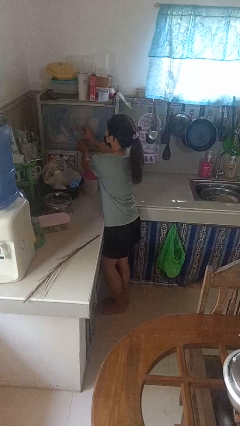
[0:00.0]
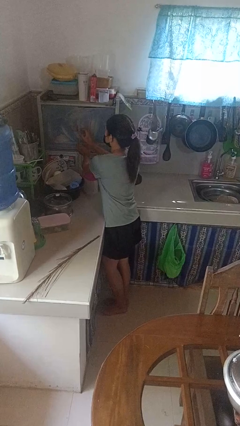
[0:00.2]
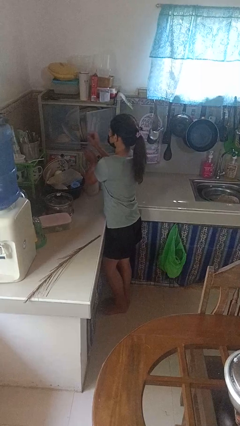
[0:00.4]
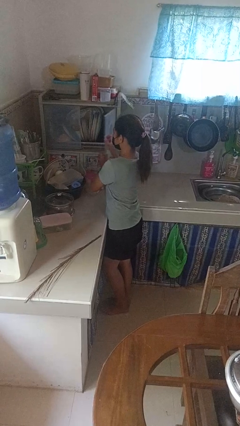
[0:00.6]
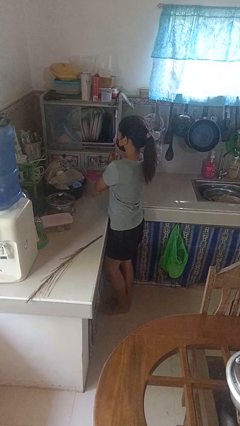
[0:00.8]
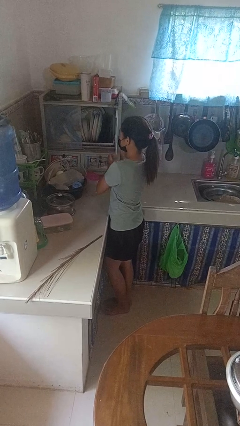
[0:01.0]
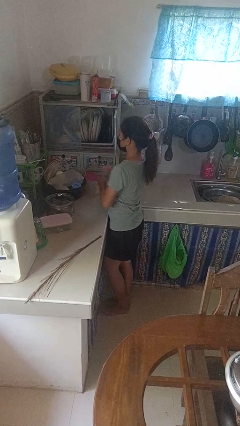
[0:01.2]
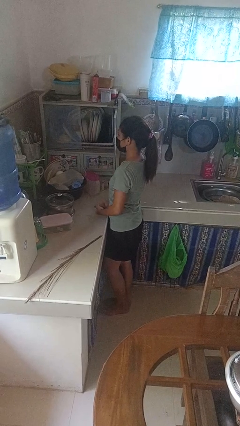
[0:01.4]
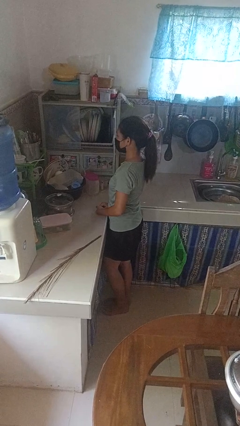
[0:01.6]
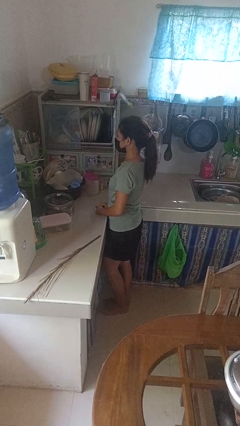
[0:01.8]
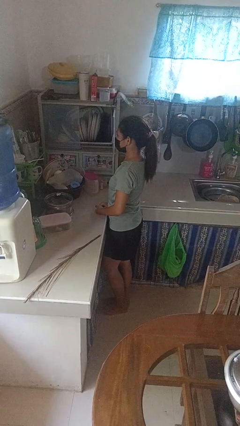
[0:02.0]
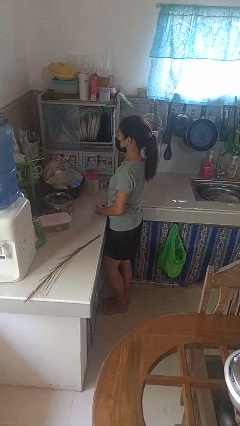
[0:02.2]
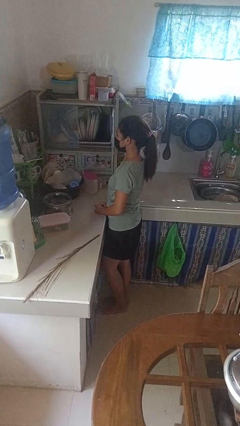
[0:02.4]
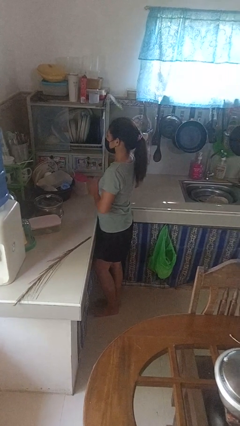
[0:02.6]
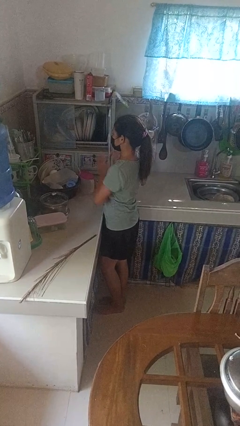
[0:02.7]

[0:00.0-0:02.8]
person opens kitchen drawer

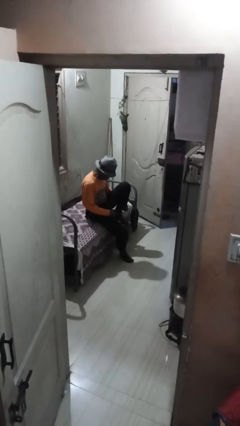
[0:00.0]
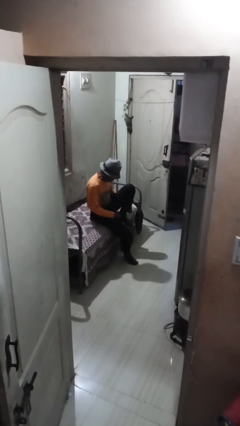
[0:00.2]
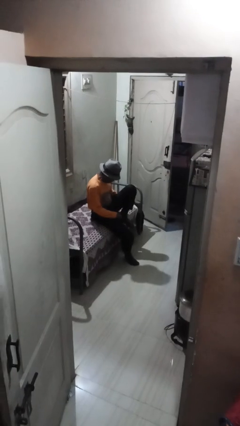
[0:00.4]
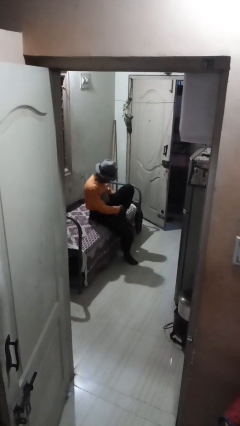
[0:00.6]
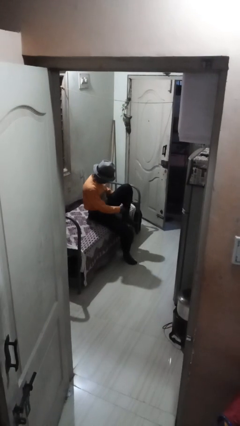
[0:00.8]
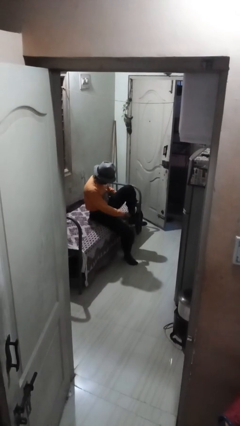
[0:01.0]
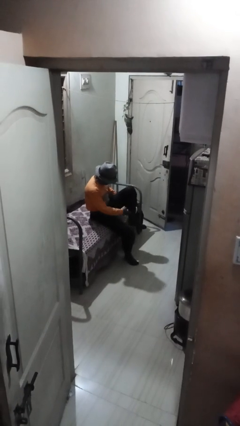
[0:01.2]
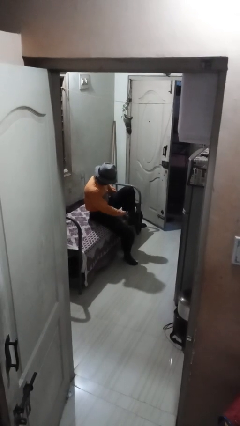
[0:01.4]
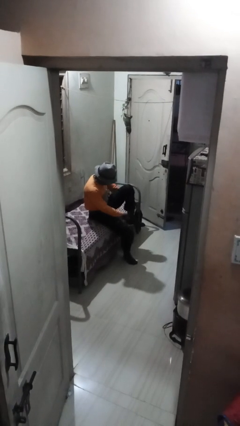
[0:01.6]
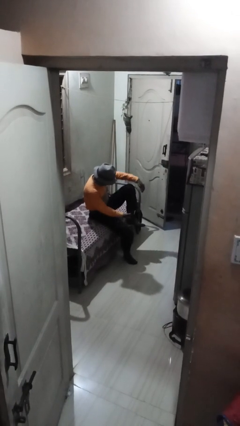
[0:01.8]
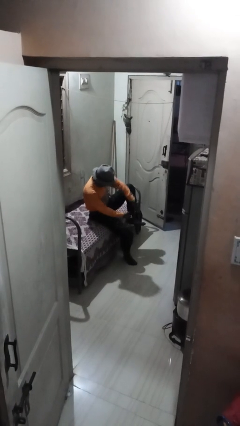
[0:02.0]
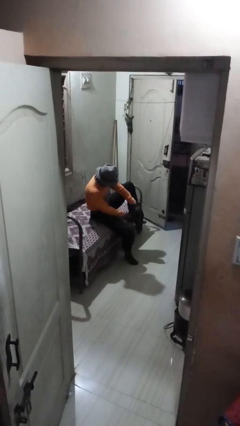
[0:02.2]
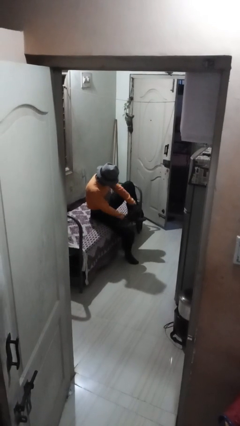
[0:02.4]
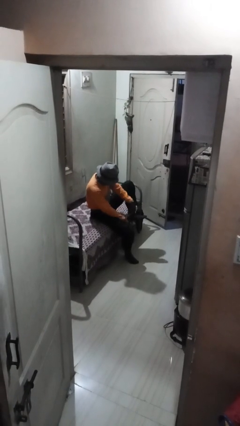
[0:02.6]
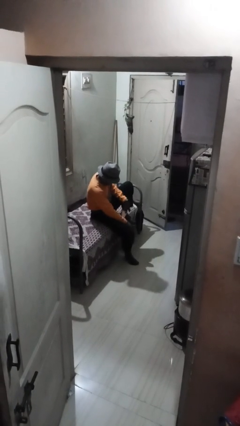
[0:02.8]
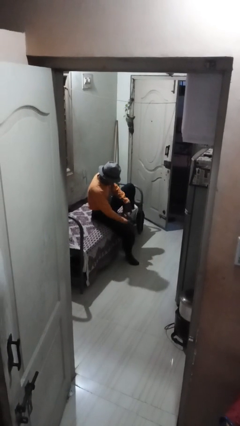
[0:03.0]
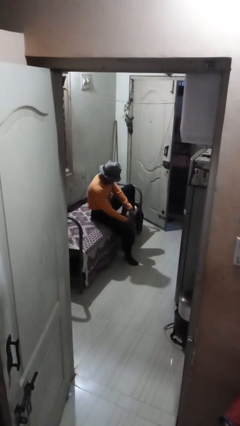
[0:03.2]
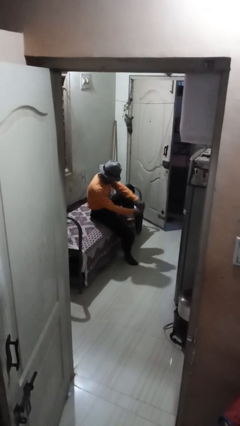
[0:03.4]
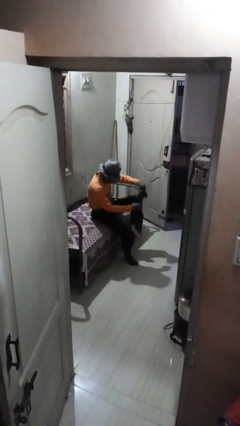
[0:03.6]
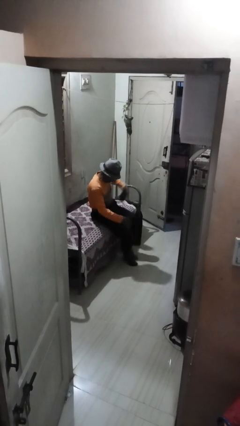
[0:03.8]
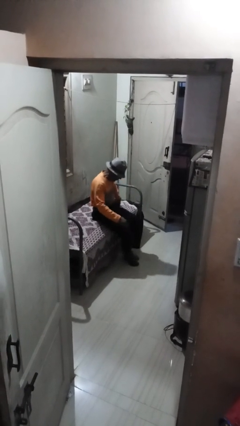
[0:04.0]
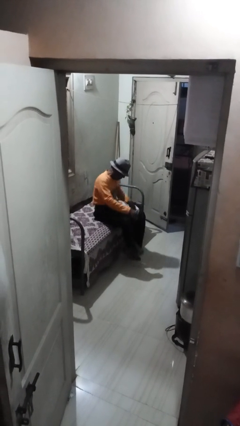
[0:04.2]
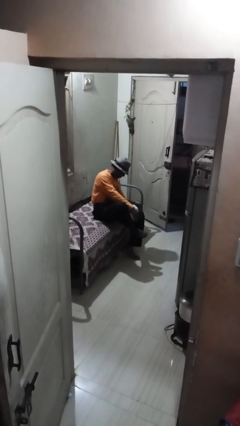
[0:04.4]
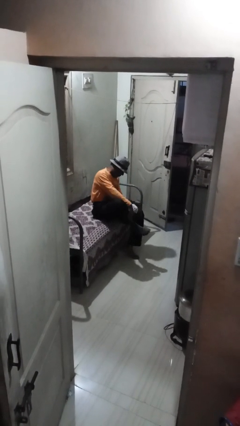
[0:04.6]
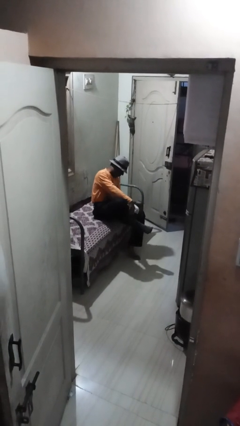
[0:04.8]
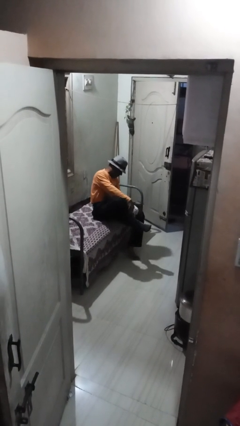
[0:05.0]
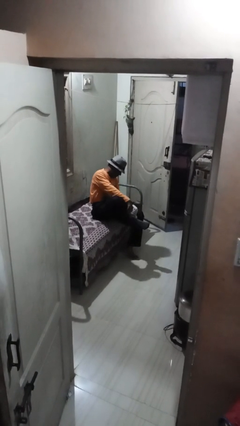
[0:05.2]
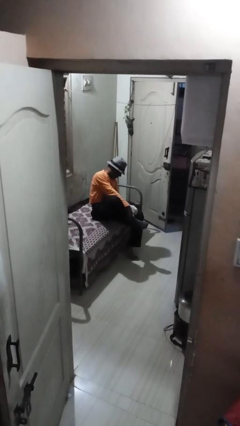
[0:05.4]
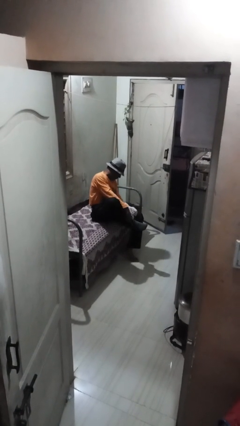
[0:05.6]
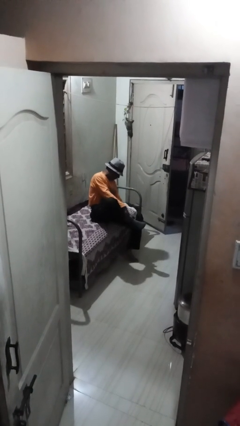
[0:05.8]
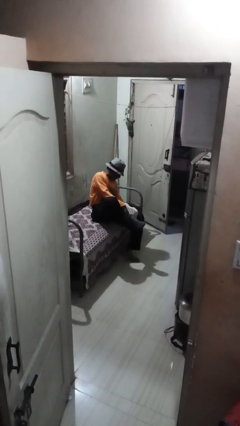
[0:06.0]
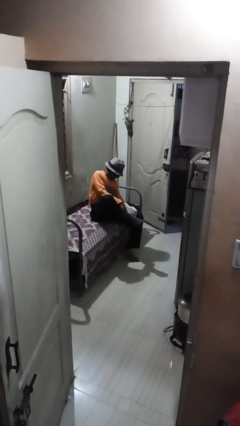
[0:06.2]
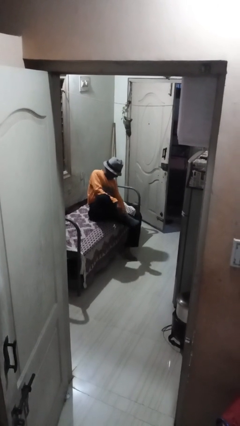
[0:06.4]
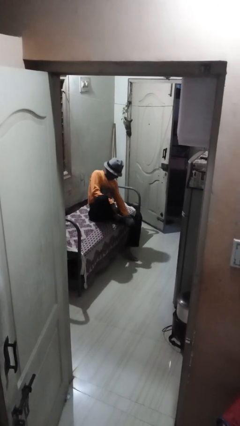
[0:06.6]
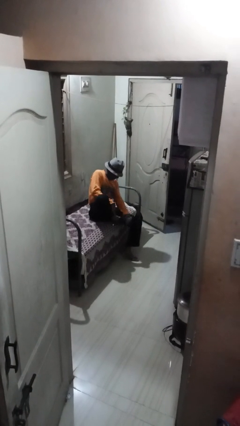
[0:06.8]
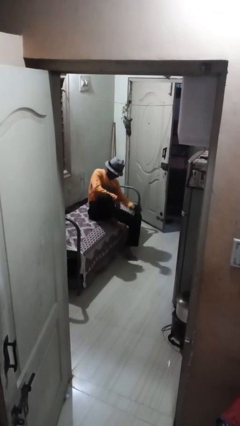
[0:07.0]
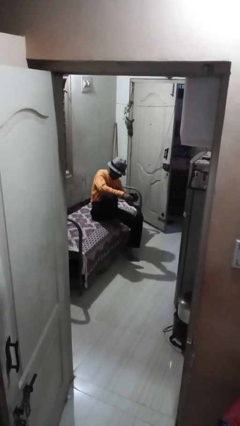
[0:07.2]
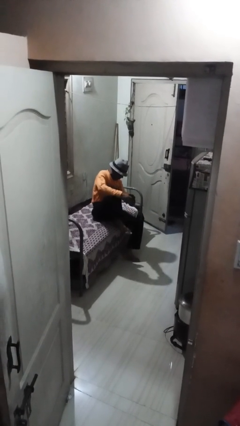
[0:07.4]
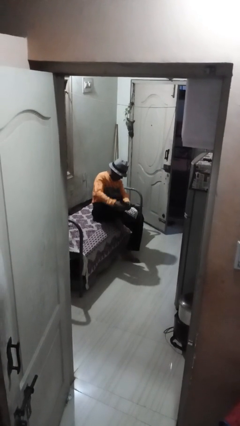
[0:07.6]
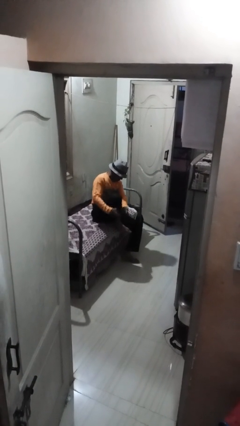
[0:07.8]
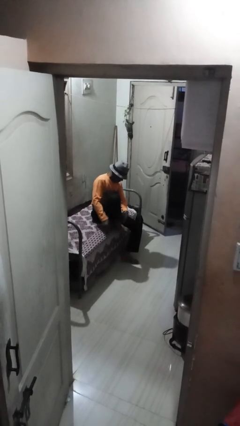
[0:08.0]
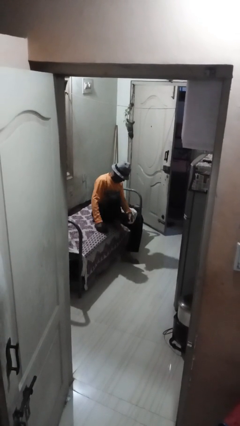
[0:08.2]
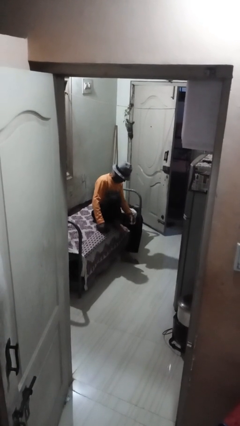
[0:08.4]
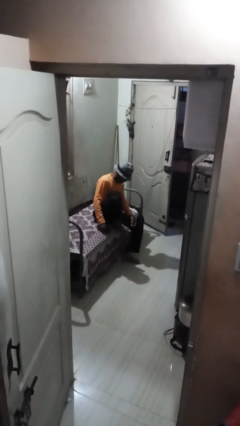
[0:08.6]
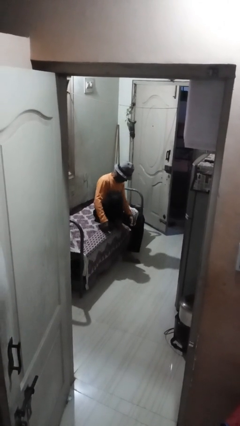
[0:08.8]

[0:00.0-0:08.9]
person takes off socks

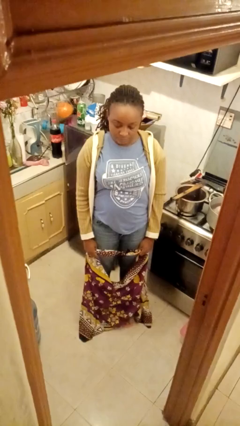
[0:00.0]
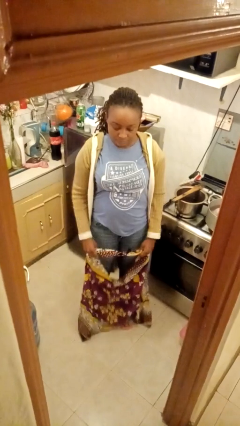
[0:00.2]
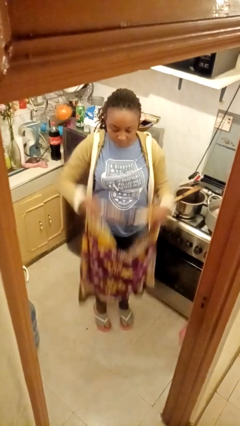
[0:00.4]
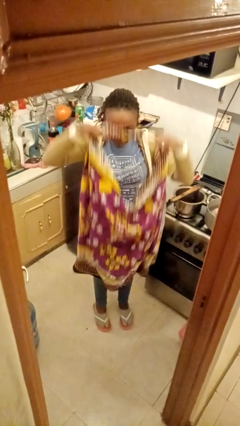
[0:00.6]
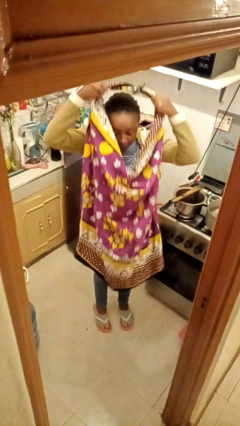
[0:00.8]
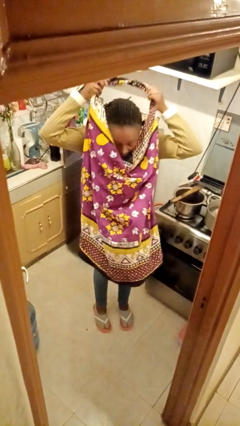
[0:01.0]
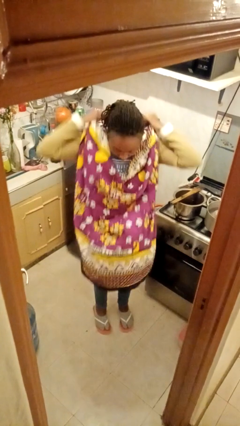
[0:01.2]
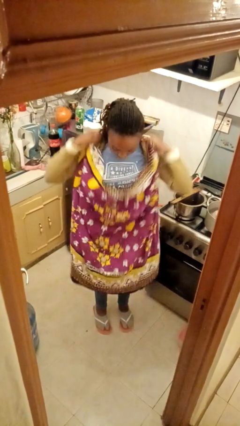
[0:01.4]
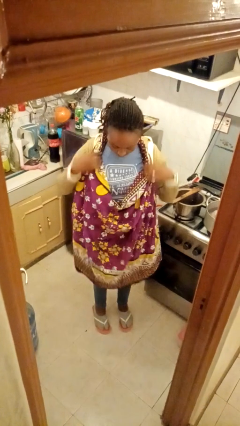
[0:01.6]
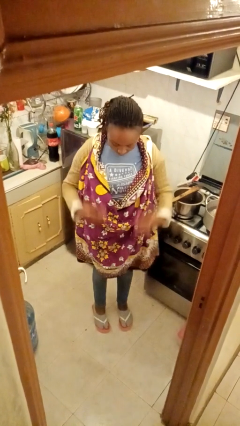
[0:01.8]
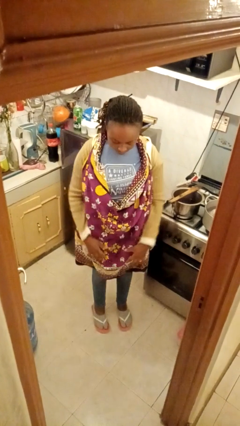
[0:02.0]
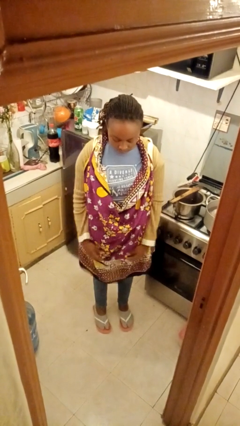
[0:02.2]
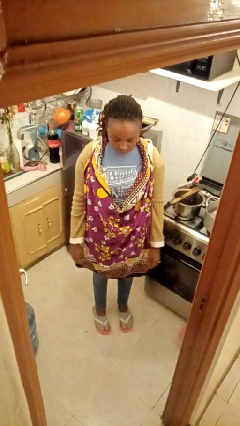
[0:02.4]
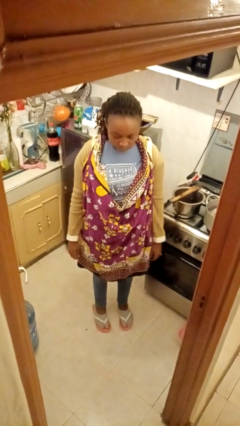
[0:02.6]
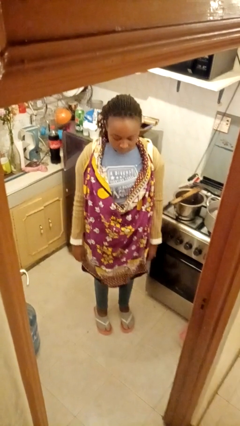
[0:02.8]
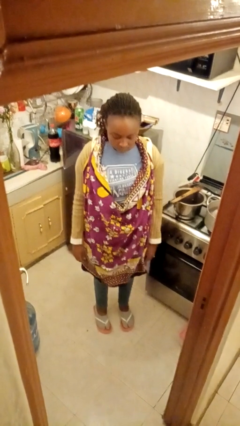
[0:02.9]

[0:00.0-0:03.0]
person puts on apron

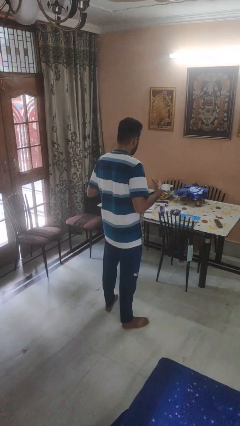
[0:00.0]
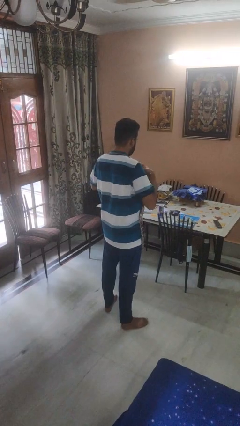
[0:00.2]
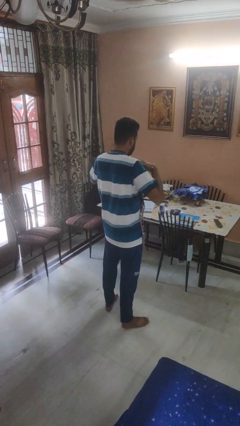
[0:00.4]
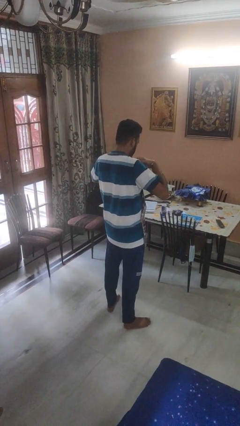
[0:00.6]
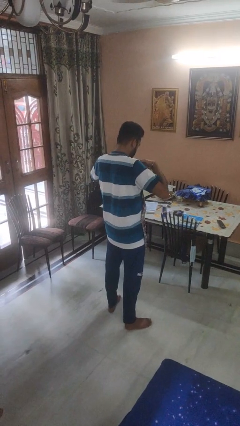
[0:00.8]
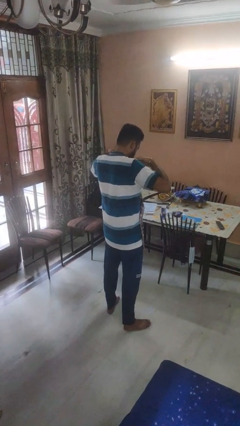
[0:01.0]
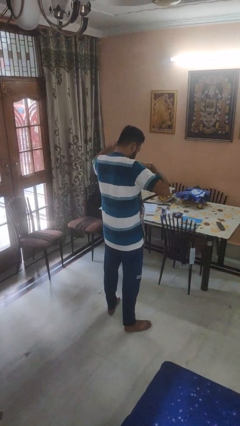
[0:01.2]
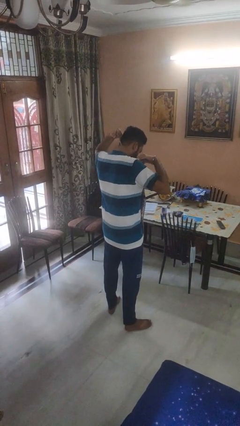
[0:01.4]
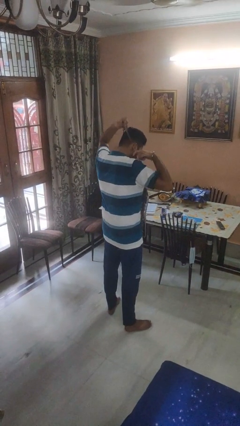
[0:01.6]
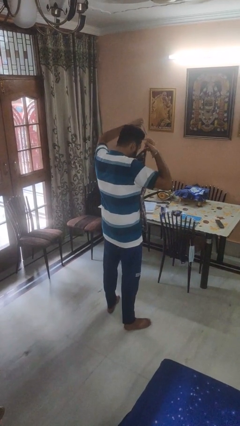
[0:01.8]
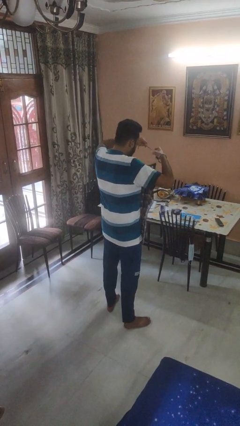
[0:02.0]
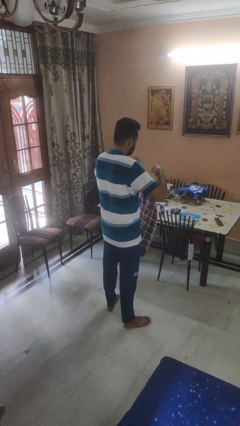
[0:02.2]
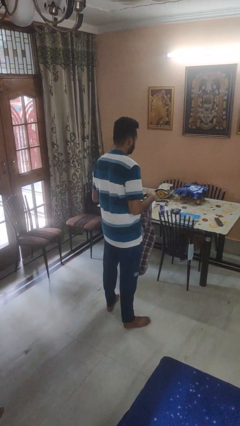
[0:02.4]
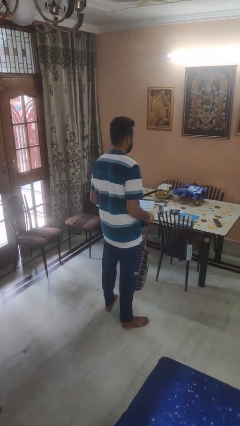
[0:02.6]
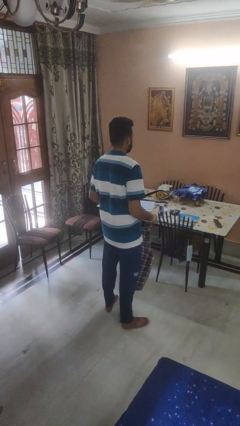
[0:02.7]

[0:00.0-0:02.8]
person takes off apron

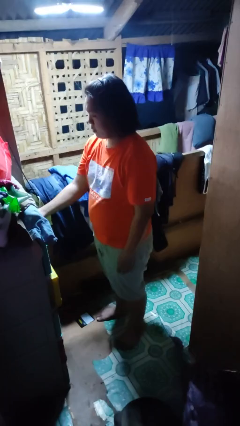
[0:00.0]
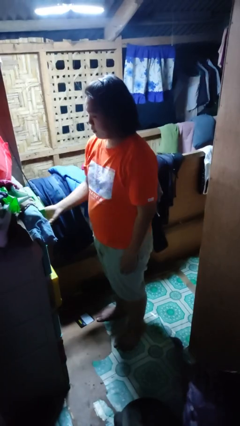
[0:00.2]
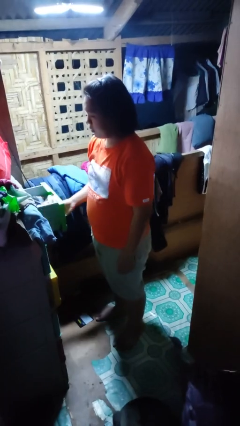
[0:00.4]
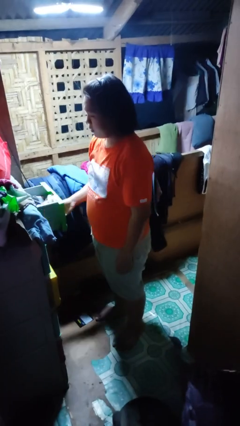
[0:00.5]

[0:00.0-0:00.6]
person opens dresser drawer
